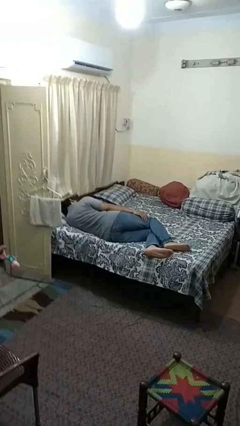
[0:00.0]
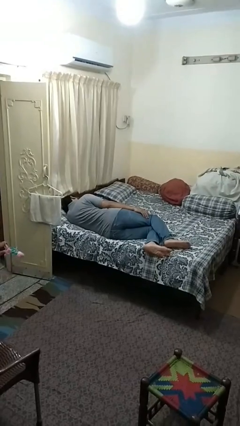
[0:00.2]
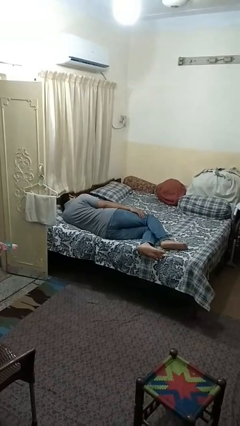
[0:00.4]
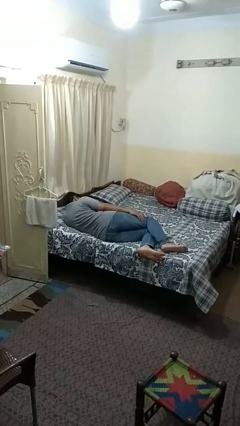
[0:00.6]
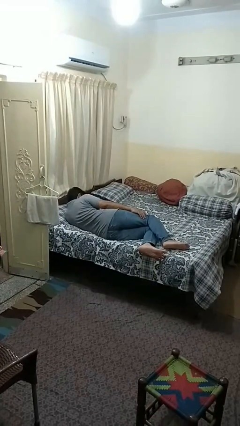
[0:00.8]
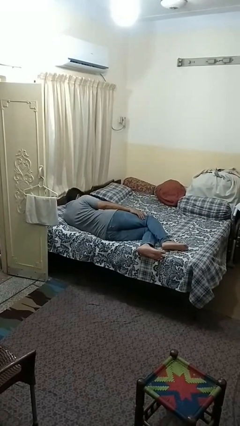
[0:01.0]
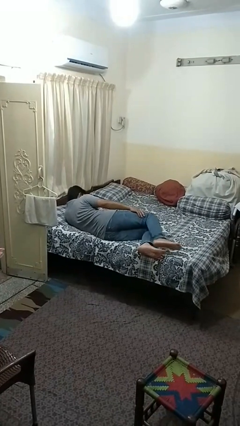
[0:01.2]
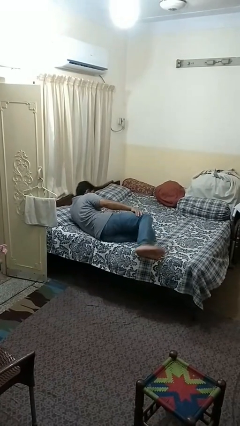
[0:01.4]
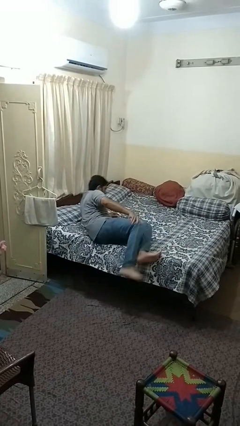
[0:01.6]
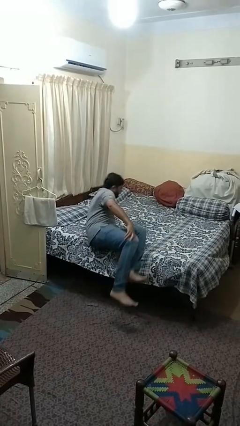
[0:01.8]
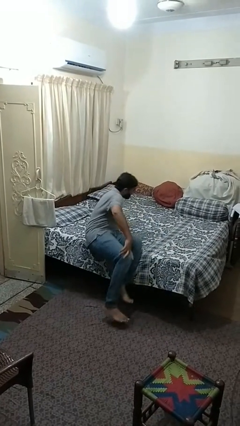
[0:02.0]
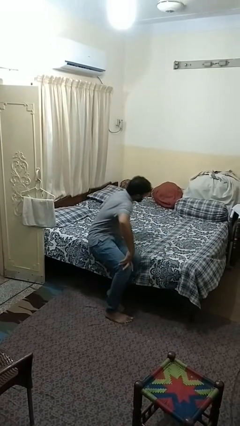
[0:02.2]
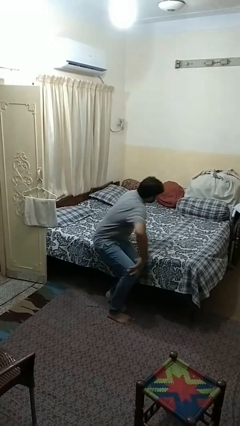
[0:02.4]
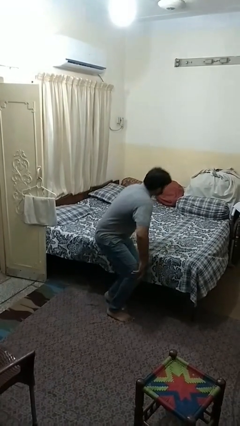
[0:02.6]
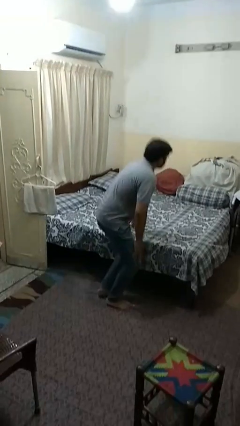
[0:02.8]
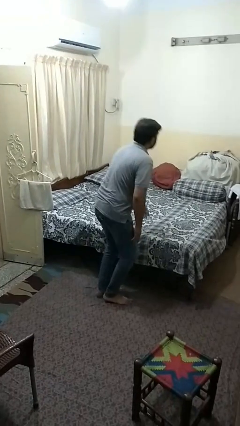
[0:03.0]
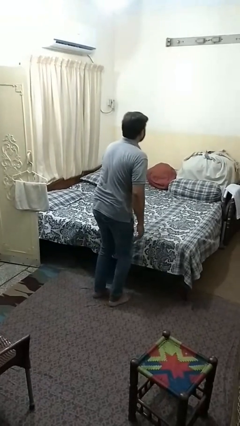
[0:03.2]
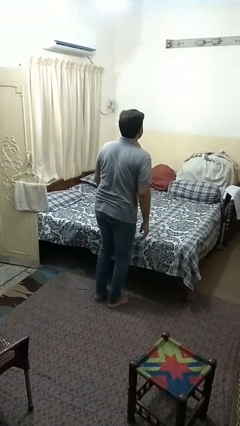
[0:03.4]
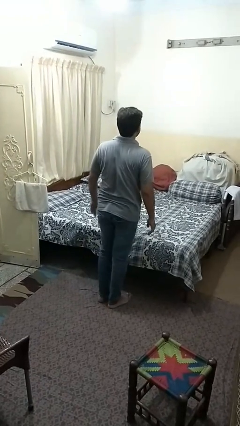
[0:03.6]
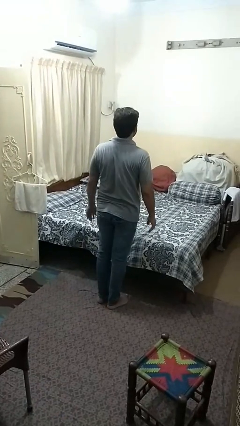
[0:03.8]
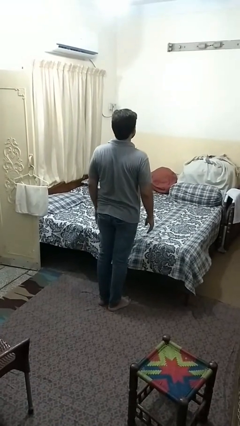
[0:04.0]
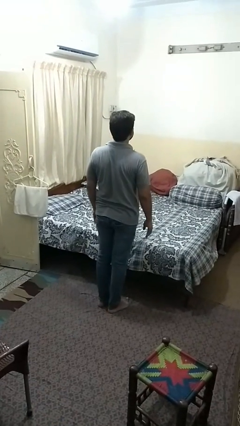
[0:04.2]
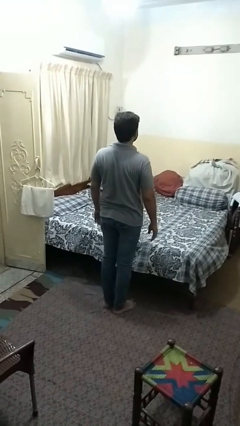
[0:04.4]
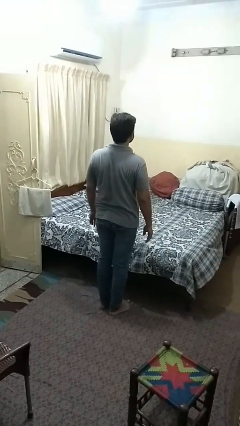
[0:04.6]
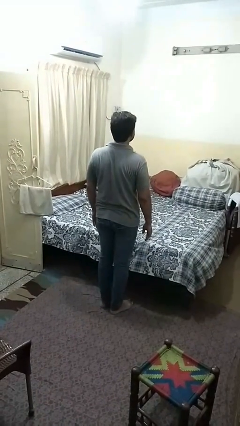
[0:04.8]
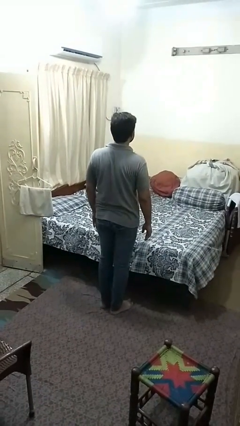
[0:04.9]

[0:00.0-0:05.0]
person stands up

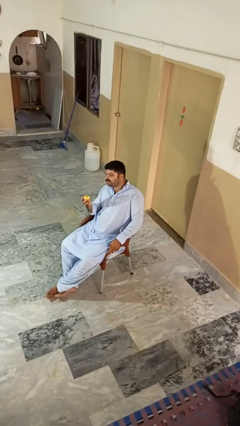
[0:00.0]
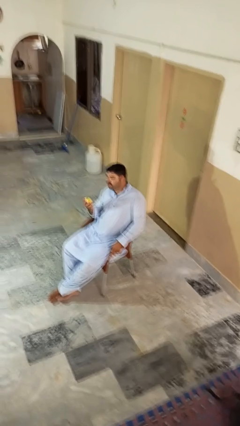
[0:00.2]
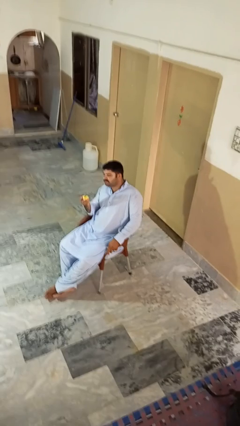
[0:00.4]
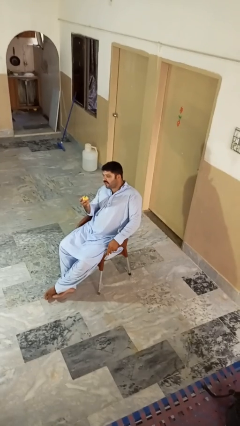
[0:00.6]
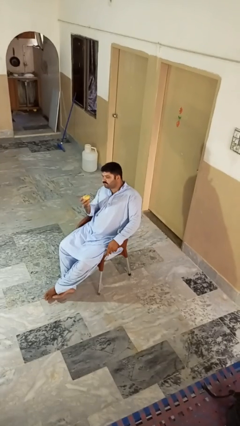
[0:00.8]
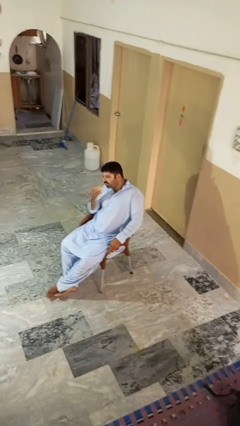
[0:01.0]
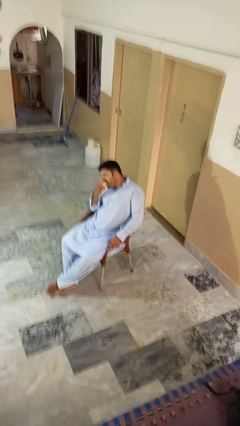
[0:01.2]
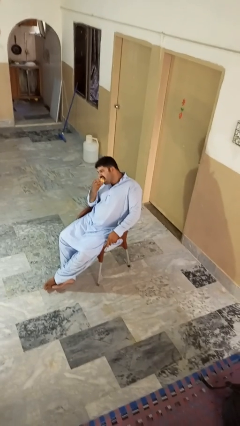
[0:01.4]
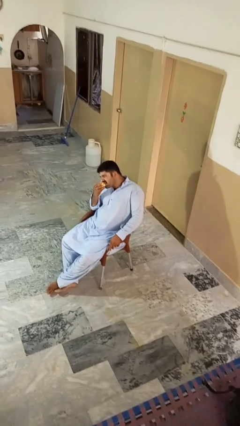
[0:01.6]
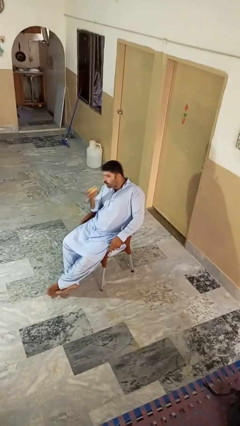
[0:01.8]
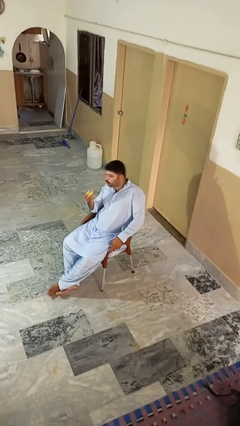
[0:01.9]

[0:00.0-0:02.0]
person eats apple

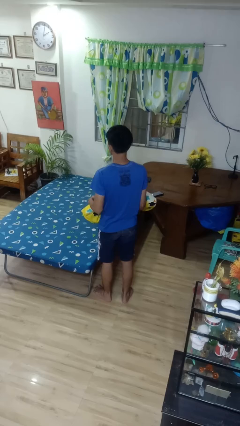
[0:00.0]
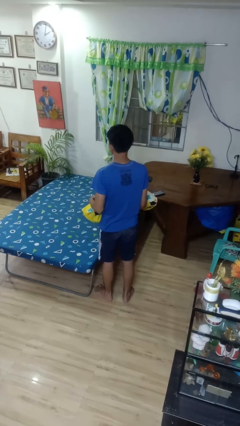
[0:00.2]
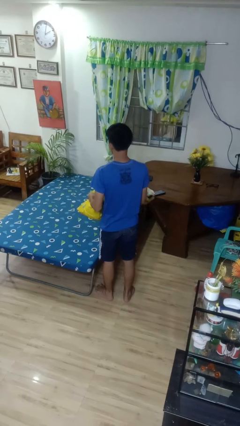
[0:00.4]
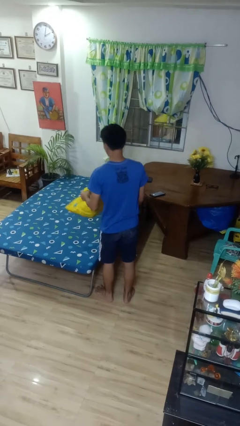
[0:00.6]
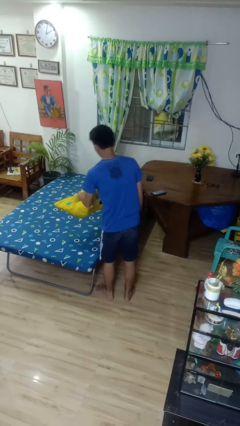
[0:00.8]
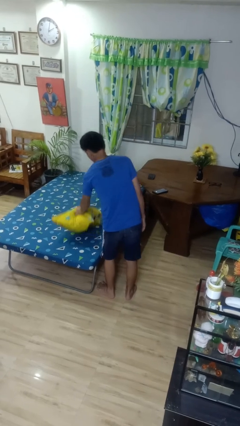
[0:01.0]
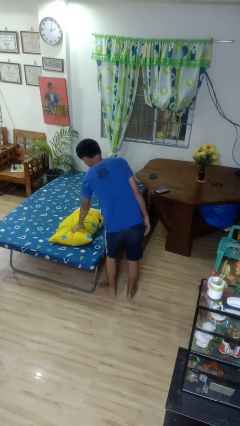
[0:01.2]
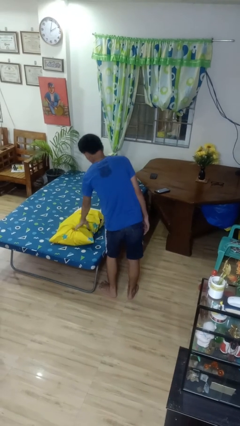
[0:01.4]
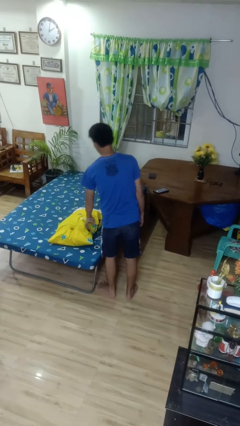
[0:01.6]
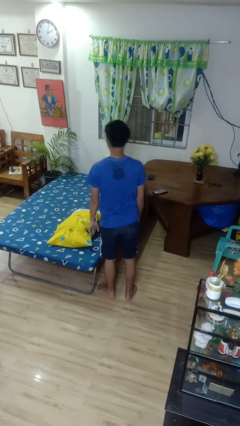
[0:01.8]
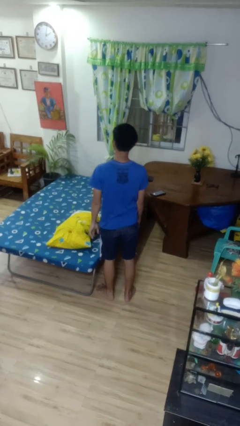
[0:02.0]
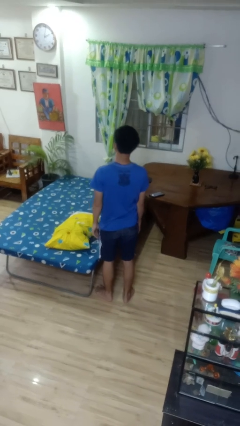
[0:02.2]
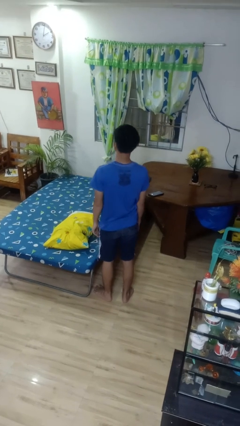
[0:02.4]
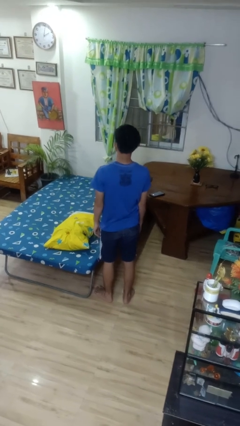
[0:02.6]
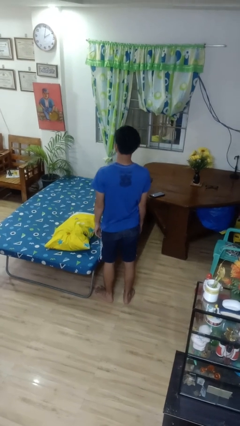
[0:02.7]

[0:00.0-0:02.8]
person puts down object on bed

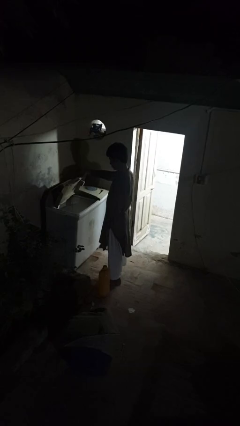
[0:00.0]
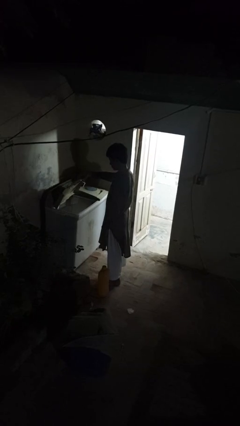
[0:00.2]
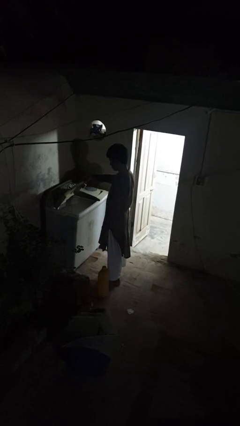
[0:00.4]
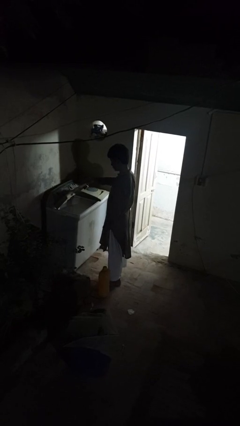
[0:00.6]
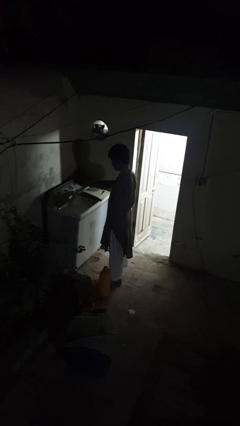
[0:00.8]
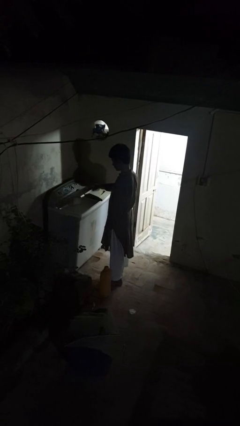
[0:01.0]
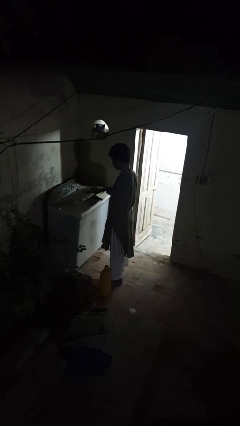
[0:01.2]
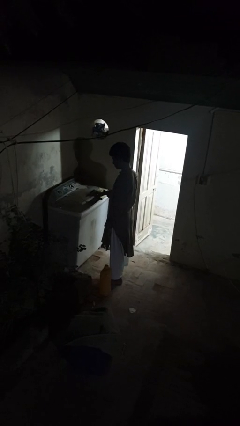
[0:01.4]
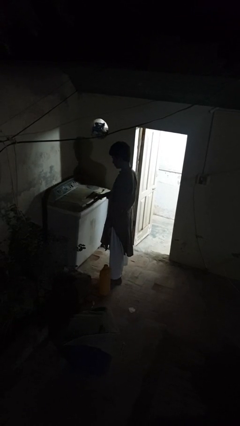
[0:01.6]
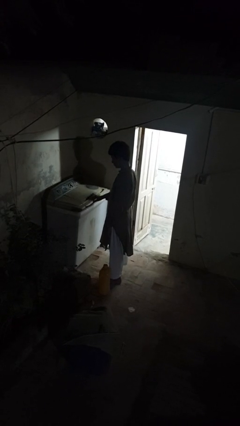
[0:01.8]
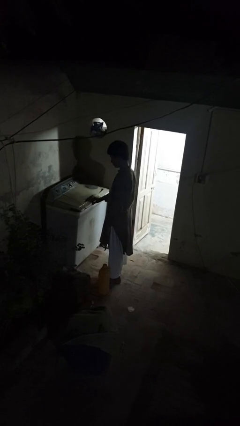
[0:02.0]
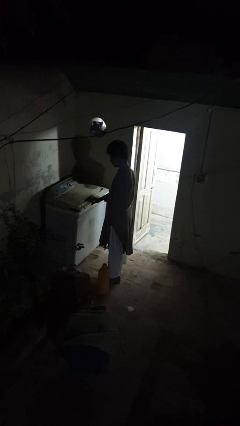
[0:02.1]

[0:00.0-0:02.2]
person closes clothes washer

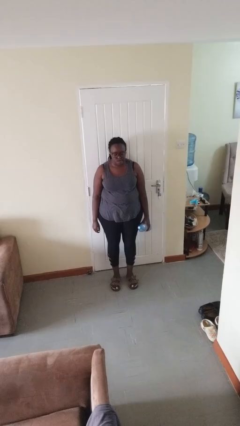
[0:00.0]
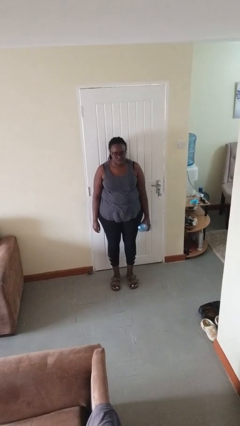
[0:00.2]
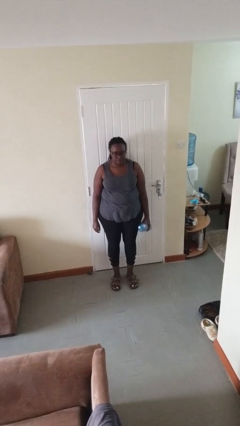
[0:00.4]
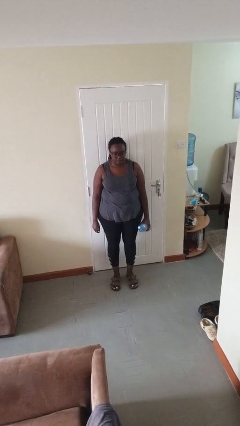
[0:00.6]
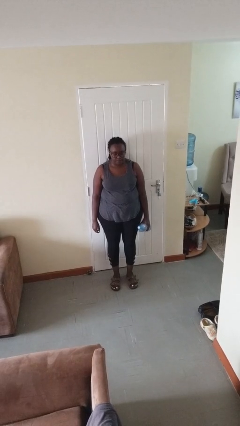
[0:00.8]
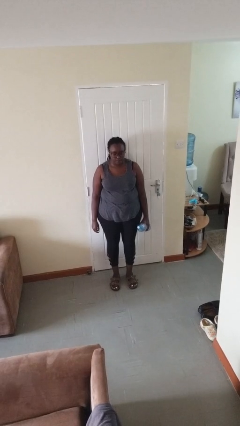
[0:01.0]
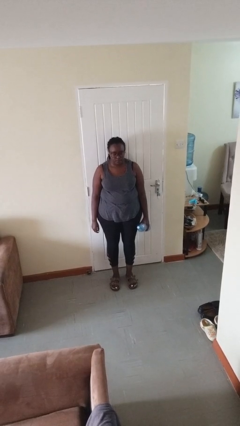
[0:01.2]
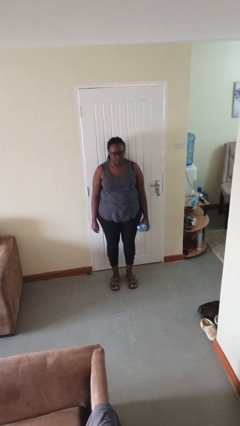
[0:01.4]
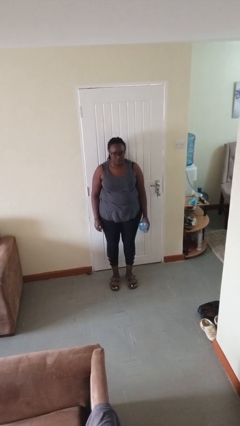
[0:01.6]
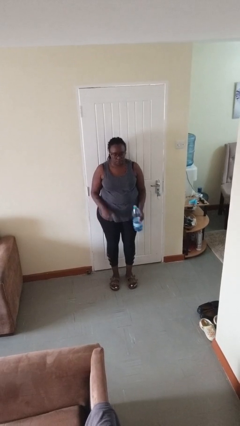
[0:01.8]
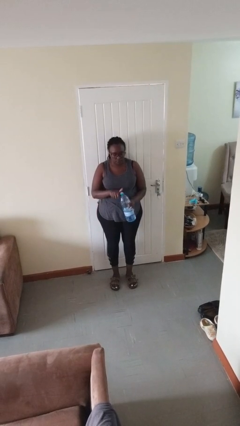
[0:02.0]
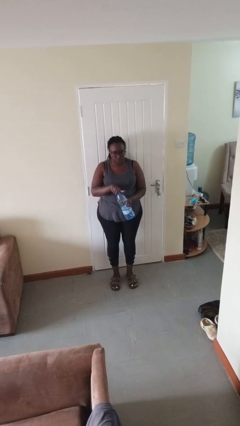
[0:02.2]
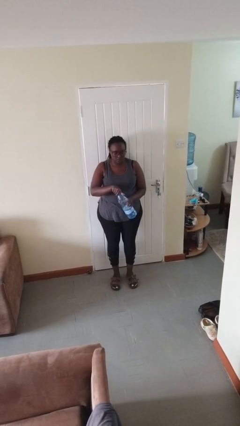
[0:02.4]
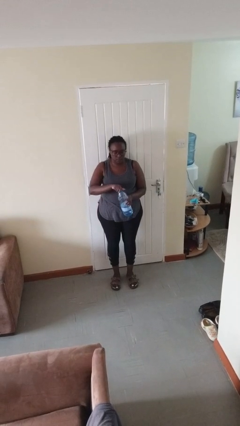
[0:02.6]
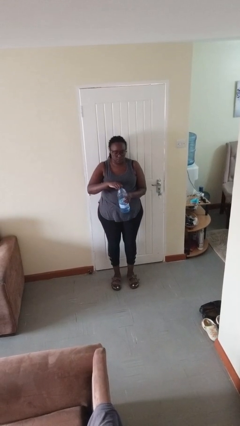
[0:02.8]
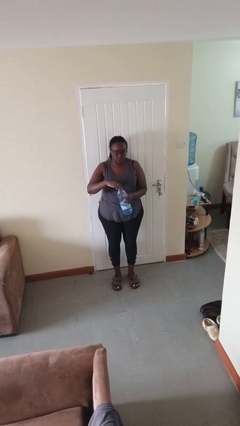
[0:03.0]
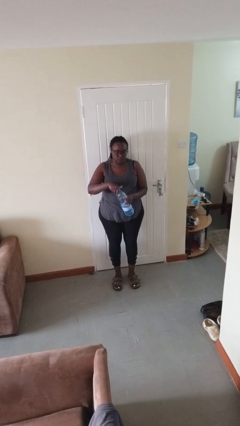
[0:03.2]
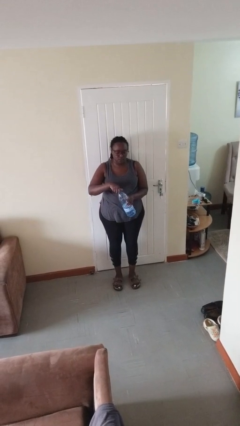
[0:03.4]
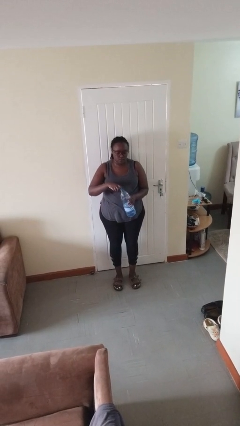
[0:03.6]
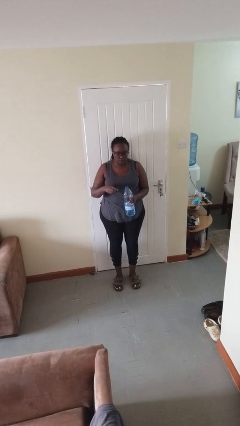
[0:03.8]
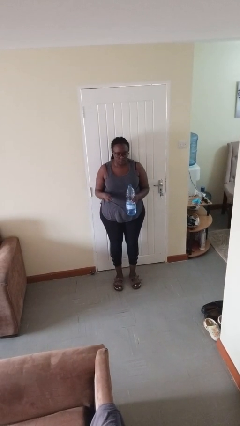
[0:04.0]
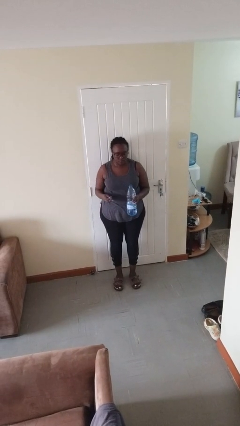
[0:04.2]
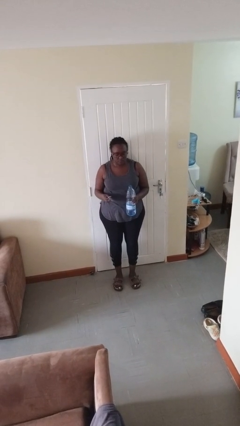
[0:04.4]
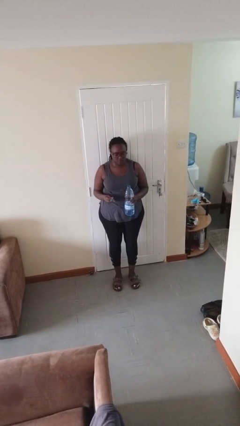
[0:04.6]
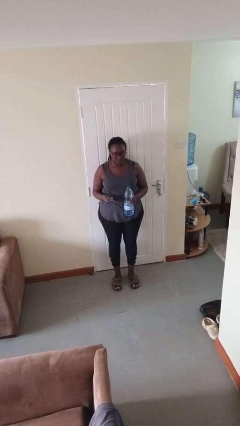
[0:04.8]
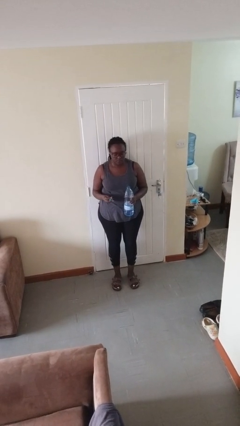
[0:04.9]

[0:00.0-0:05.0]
person unscrews lid from bottle

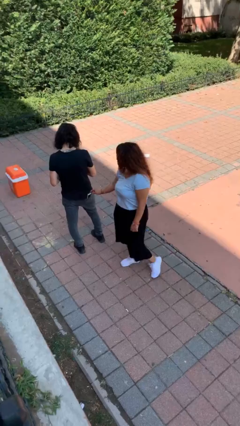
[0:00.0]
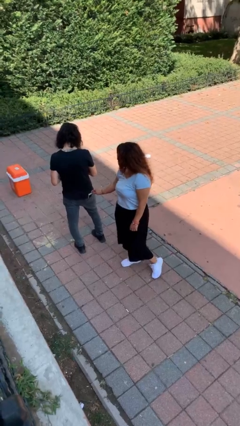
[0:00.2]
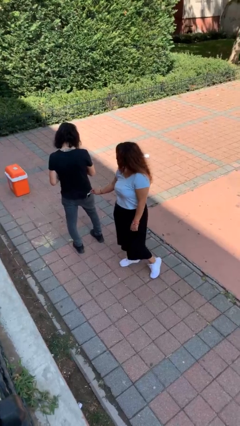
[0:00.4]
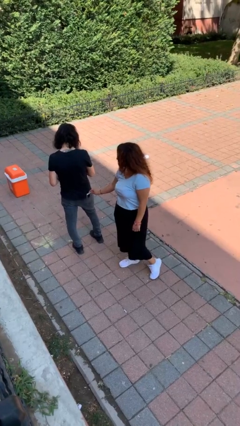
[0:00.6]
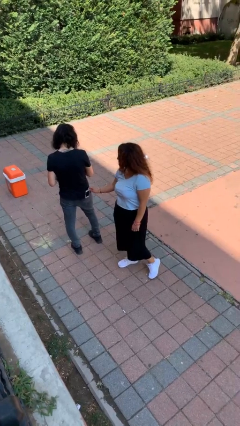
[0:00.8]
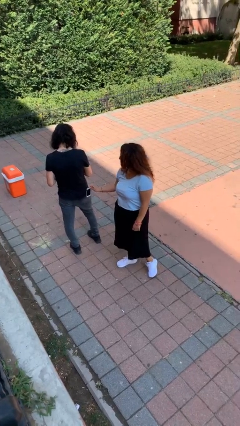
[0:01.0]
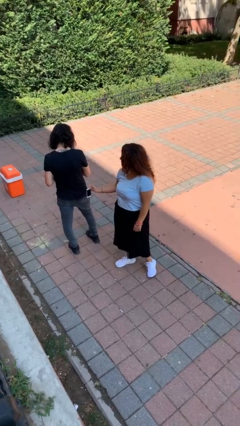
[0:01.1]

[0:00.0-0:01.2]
person steals object from person
